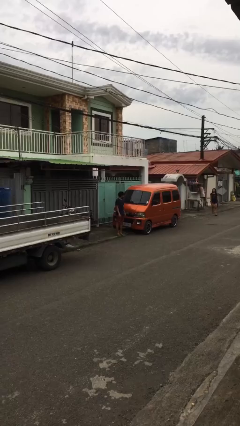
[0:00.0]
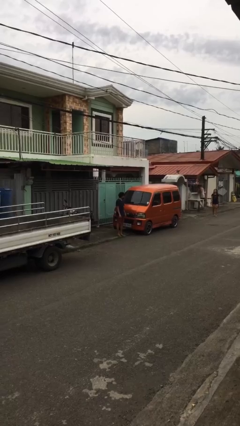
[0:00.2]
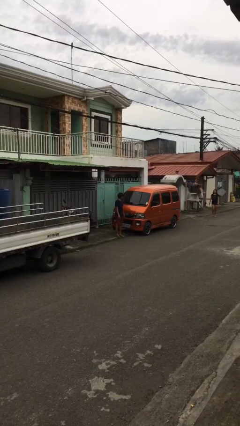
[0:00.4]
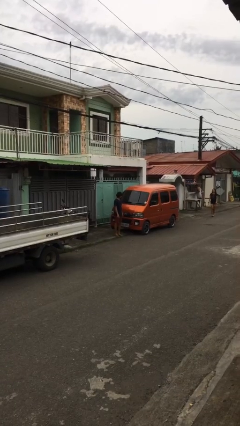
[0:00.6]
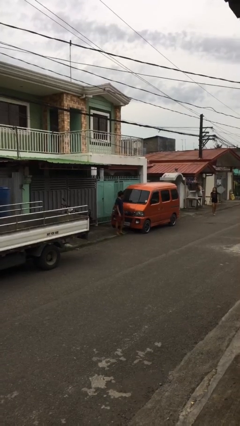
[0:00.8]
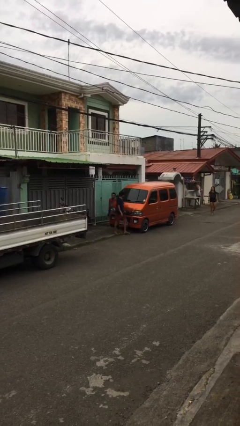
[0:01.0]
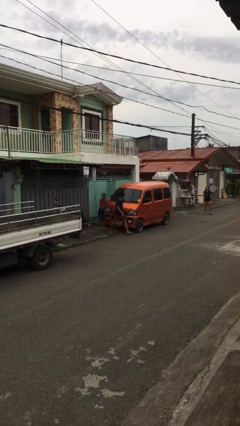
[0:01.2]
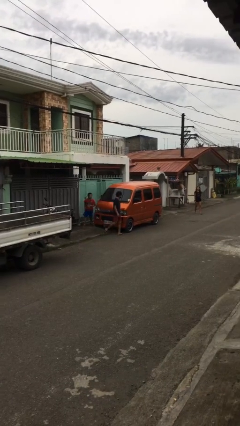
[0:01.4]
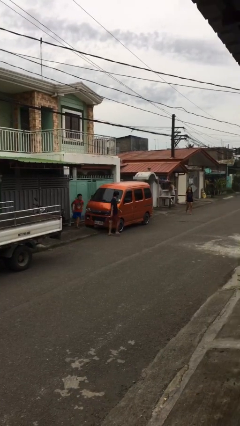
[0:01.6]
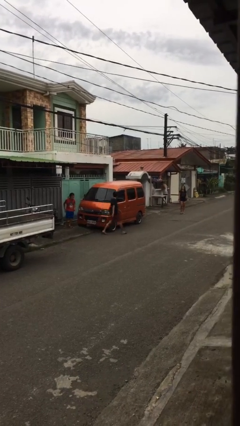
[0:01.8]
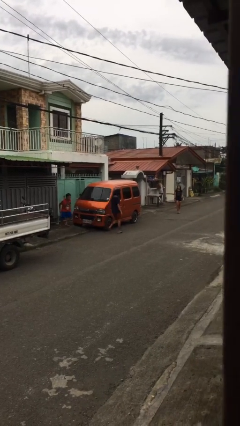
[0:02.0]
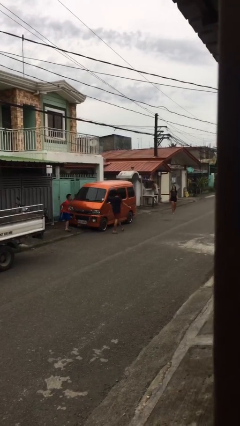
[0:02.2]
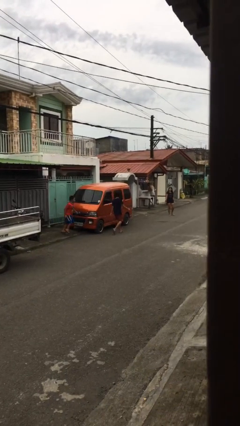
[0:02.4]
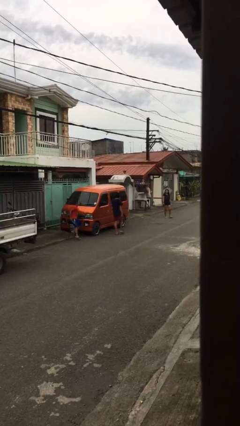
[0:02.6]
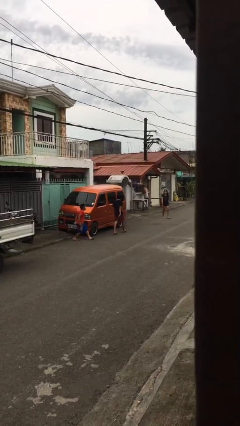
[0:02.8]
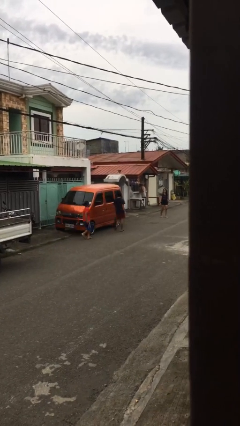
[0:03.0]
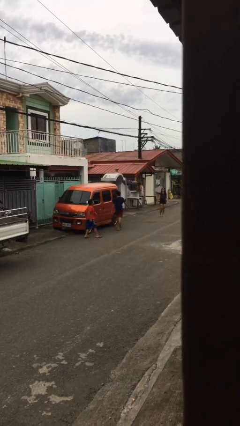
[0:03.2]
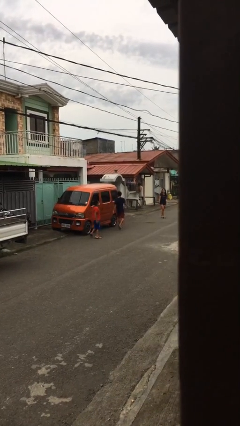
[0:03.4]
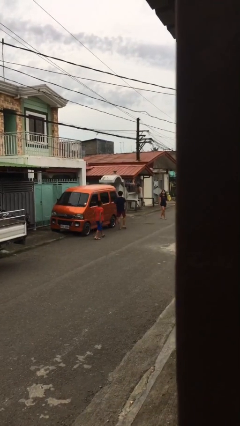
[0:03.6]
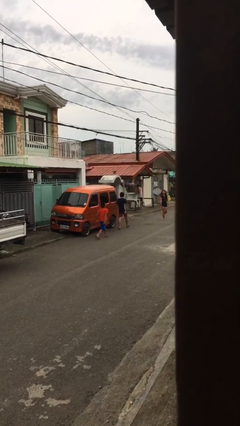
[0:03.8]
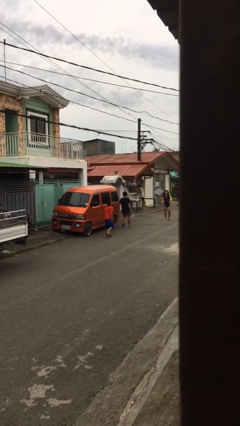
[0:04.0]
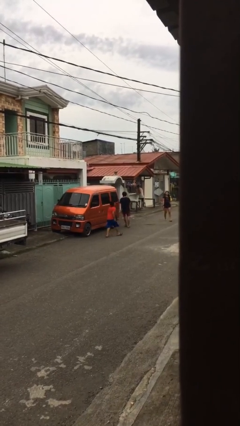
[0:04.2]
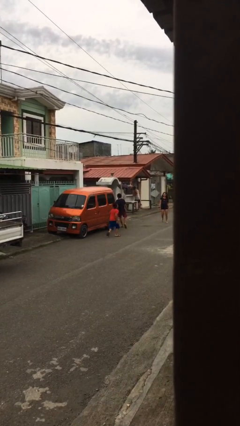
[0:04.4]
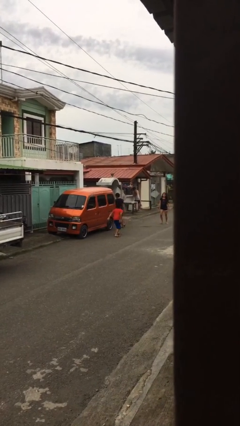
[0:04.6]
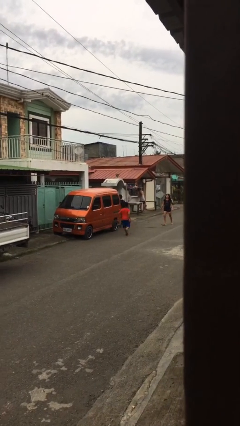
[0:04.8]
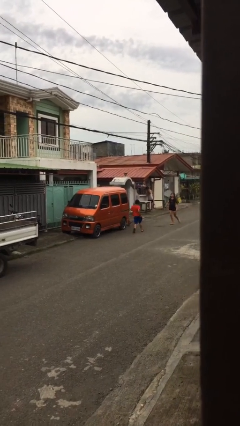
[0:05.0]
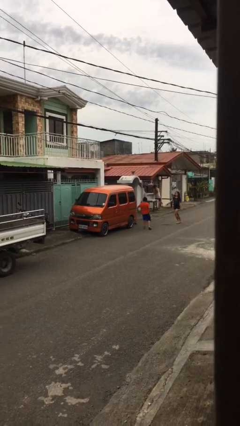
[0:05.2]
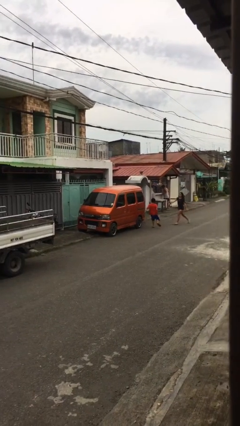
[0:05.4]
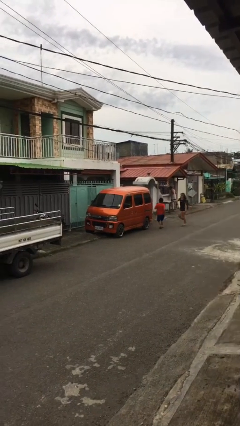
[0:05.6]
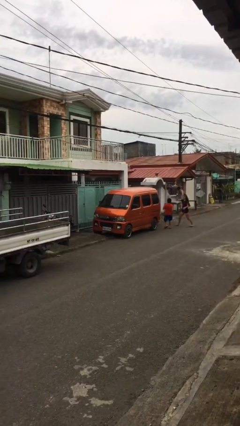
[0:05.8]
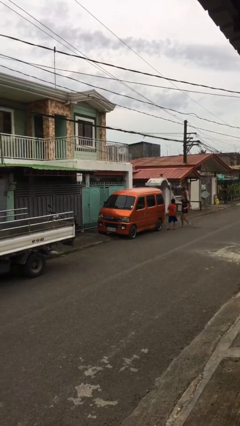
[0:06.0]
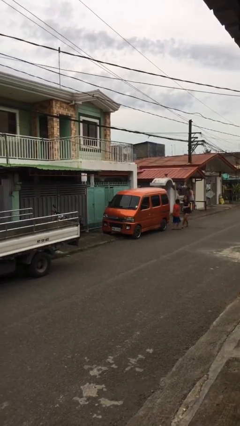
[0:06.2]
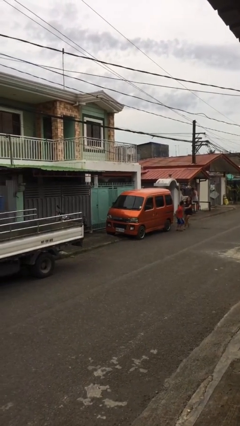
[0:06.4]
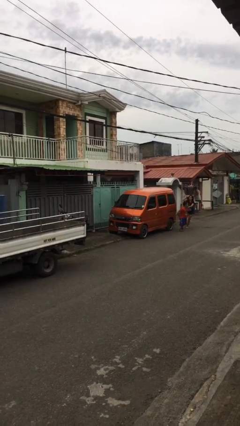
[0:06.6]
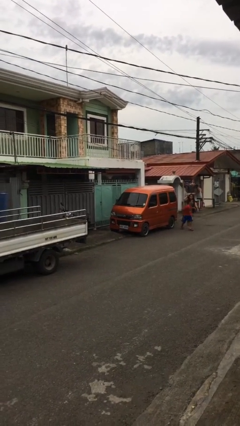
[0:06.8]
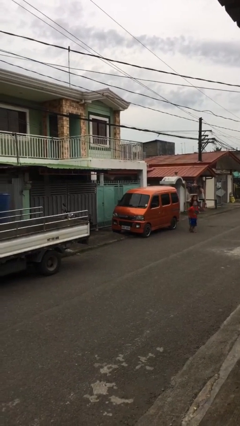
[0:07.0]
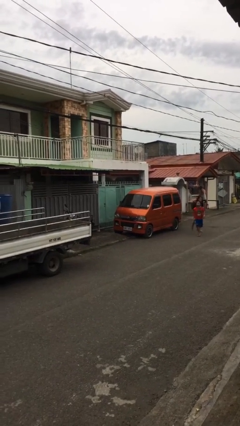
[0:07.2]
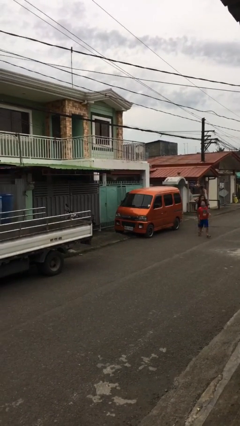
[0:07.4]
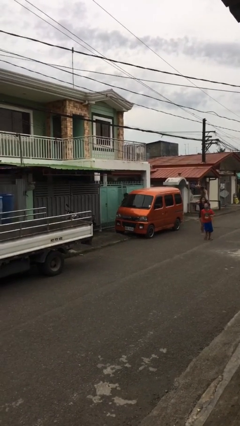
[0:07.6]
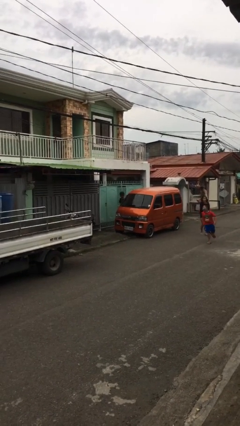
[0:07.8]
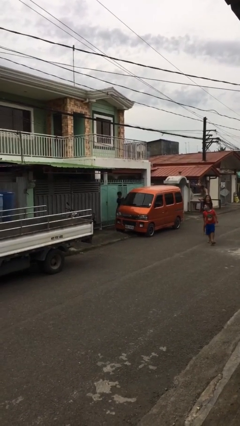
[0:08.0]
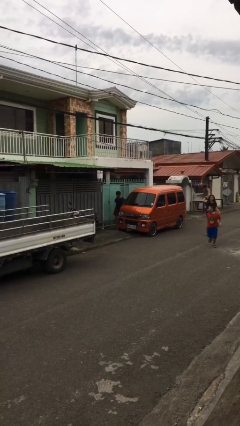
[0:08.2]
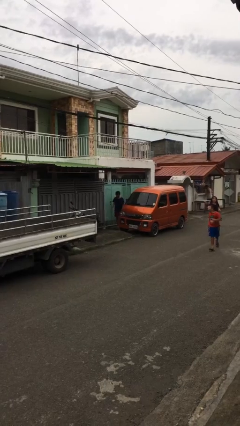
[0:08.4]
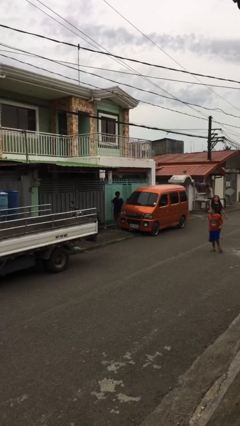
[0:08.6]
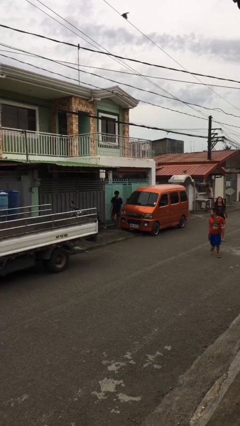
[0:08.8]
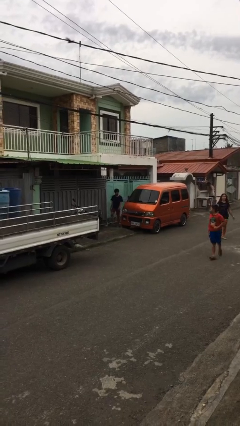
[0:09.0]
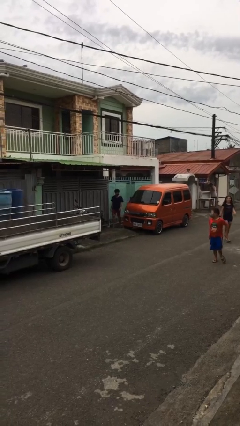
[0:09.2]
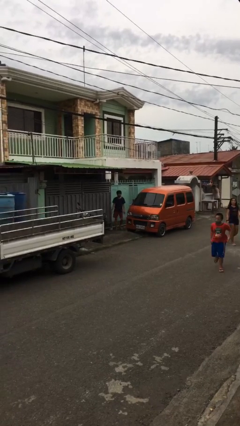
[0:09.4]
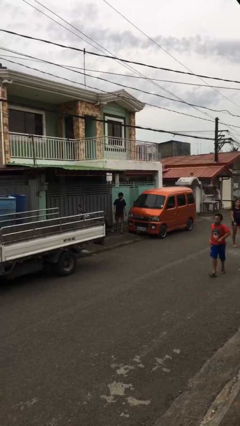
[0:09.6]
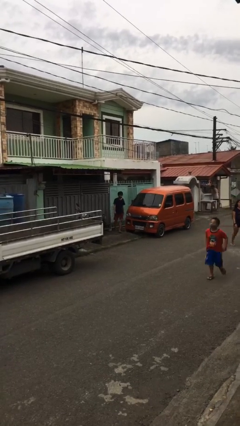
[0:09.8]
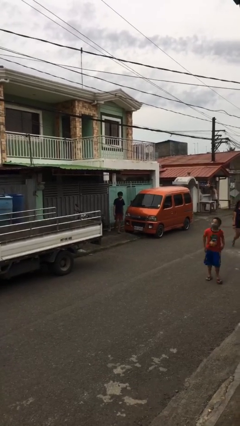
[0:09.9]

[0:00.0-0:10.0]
person walks around car

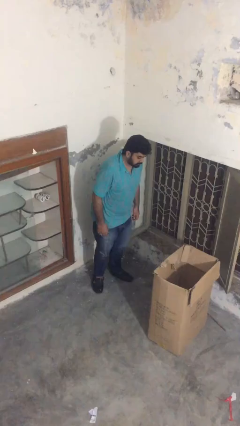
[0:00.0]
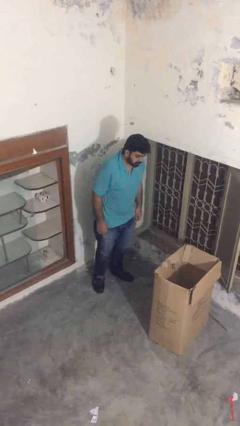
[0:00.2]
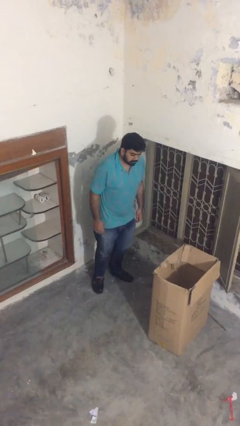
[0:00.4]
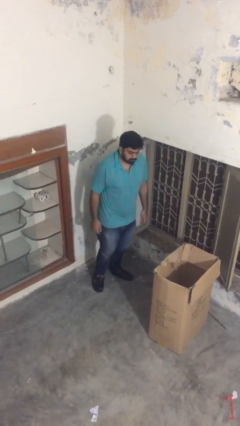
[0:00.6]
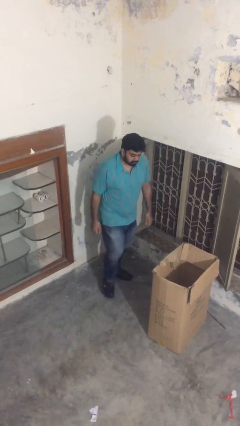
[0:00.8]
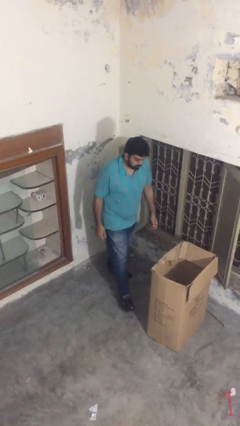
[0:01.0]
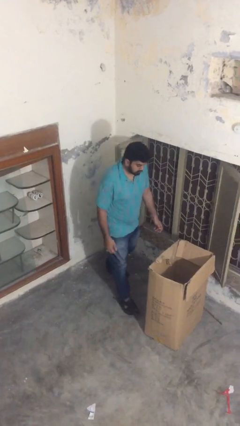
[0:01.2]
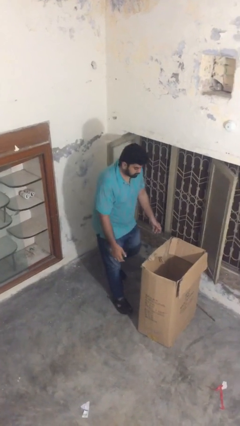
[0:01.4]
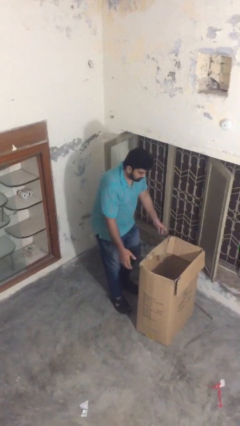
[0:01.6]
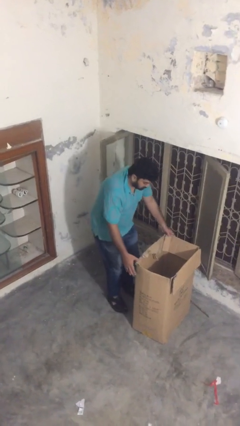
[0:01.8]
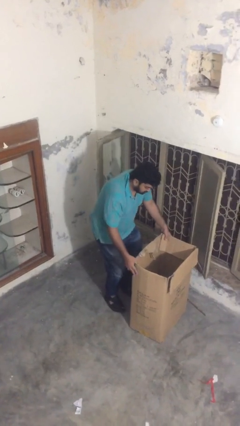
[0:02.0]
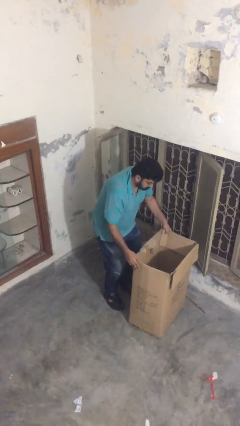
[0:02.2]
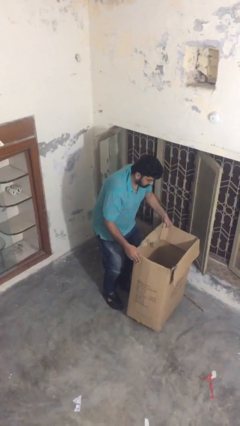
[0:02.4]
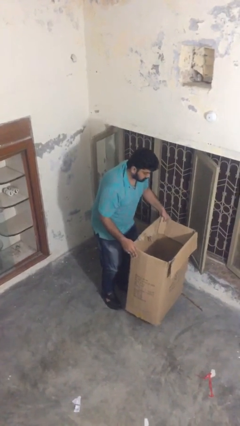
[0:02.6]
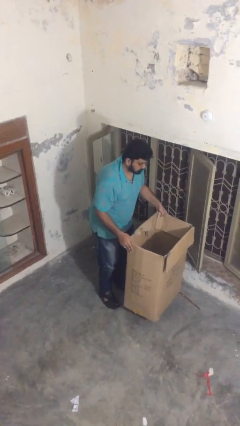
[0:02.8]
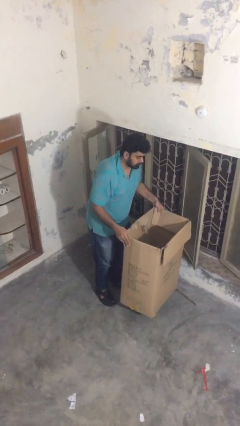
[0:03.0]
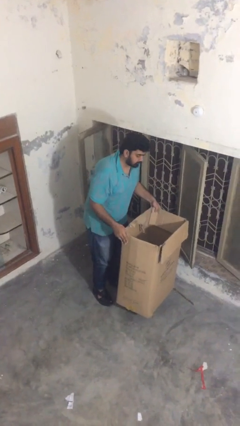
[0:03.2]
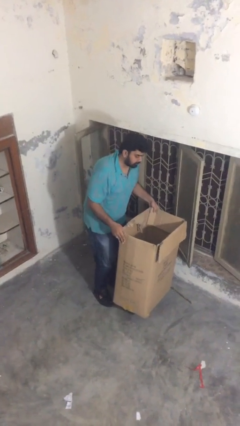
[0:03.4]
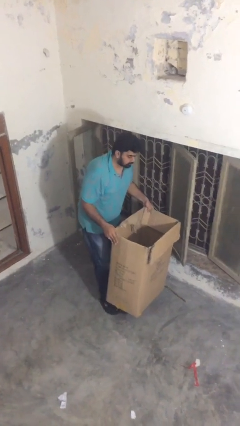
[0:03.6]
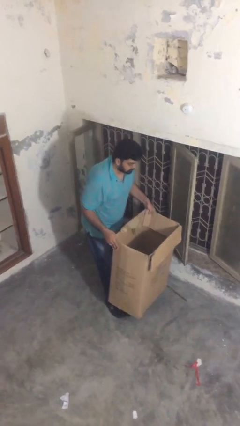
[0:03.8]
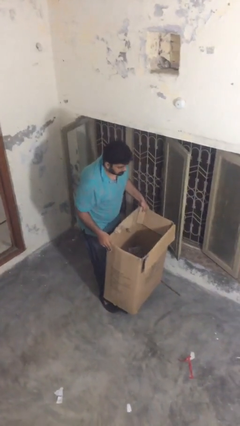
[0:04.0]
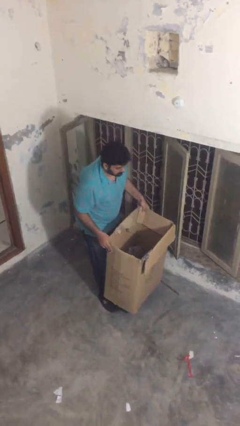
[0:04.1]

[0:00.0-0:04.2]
person picks up object from floor

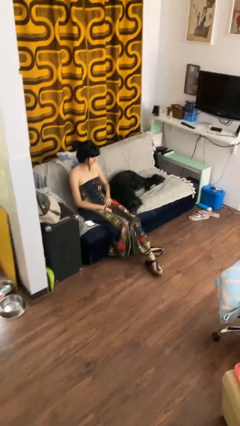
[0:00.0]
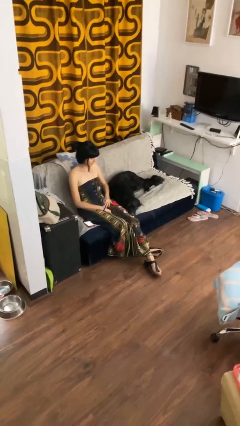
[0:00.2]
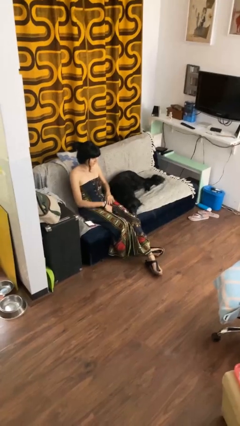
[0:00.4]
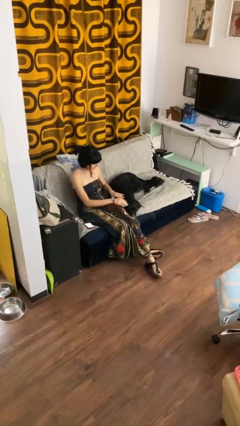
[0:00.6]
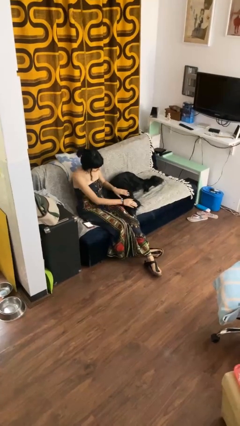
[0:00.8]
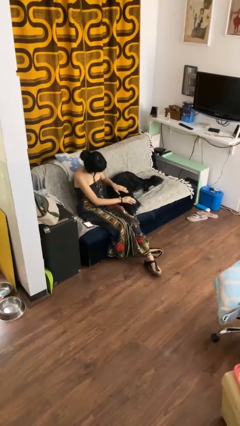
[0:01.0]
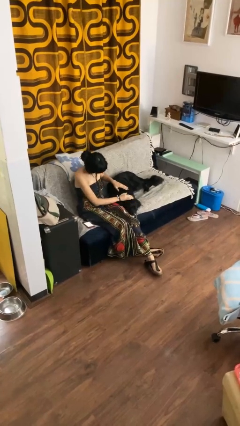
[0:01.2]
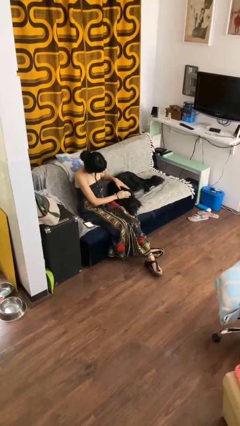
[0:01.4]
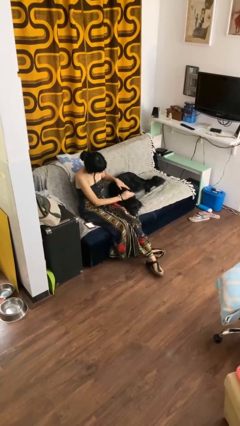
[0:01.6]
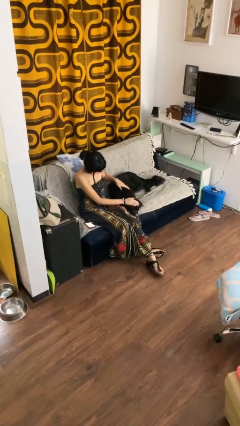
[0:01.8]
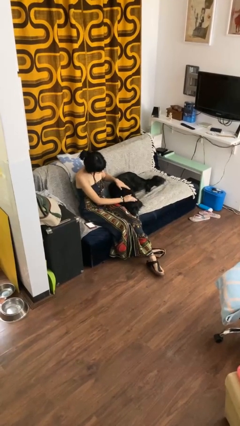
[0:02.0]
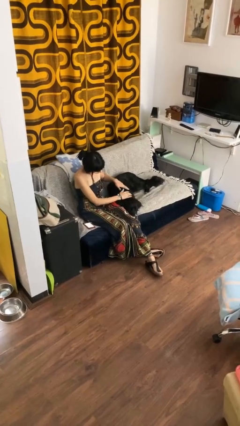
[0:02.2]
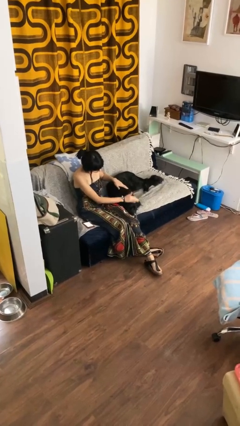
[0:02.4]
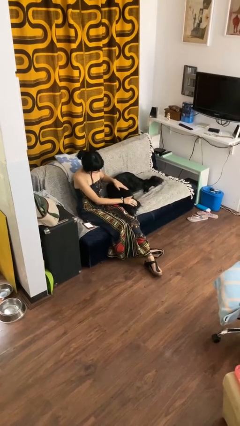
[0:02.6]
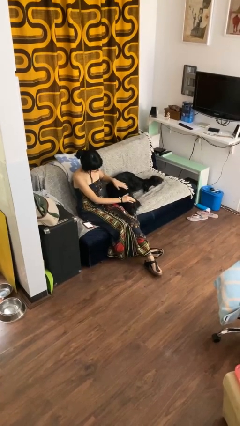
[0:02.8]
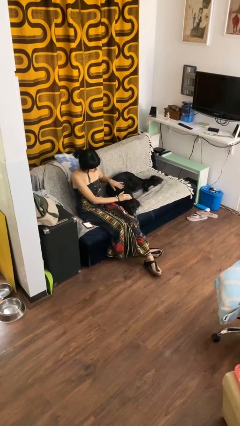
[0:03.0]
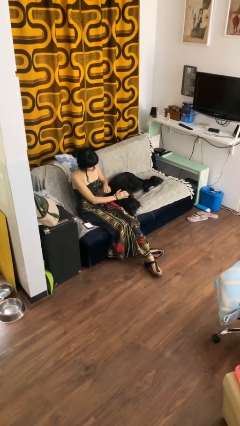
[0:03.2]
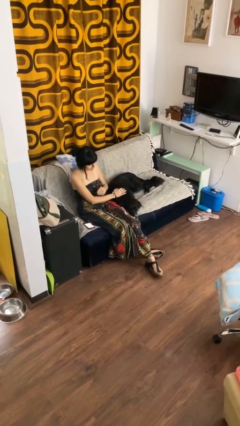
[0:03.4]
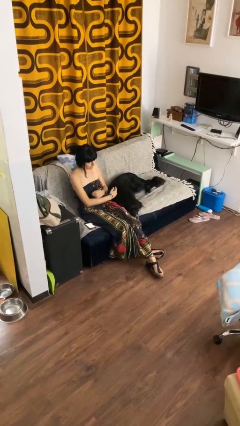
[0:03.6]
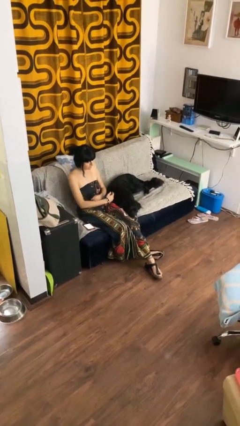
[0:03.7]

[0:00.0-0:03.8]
person pets dog
